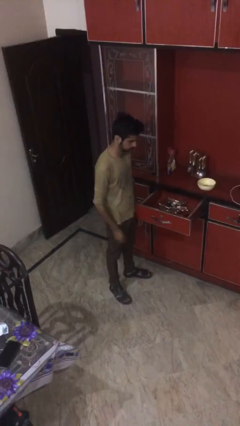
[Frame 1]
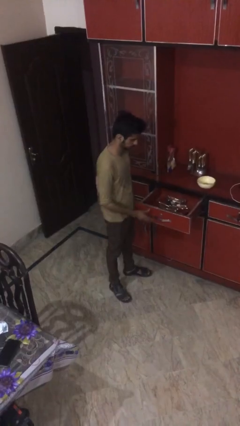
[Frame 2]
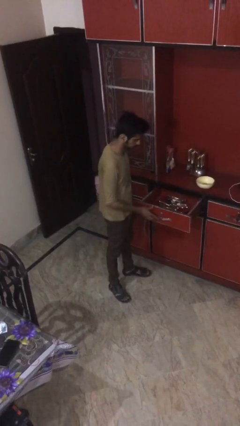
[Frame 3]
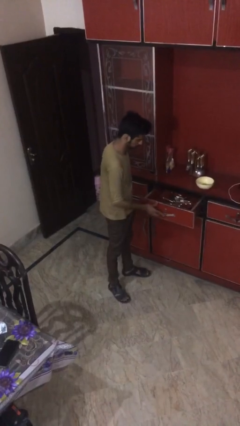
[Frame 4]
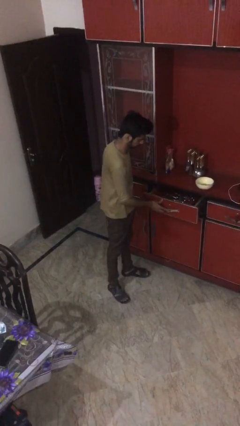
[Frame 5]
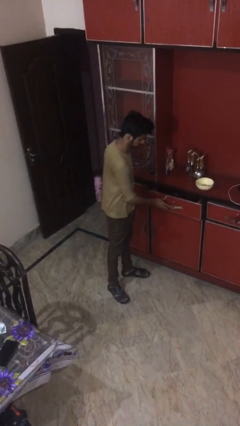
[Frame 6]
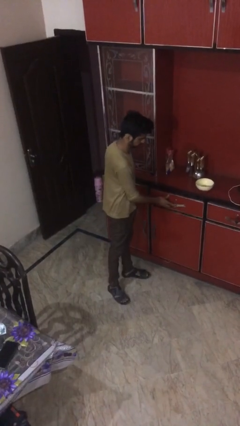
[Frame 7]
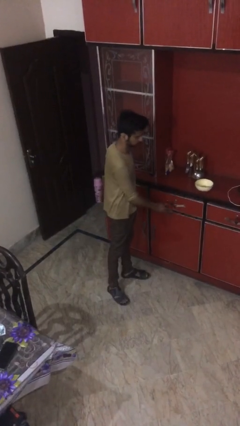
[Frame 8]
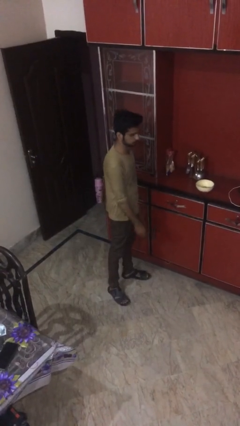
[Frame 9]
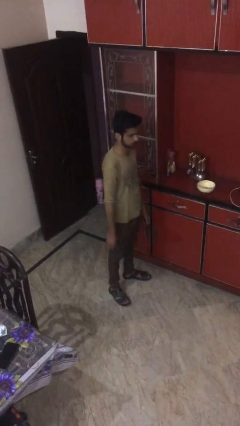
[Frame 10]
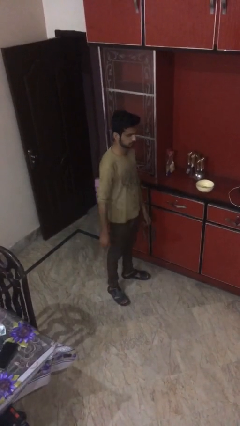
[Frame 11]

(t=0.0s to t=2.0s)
person closes kitchen drawer

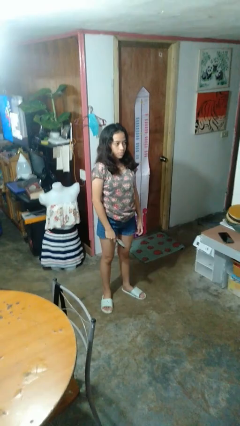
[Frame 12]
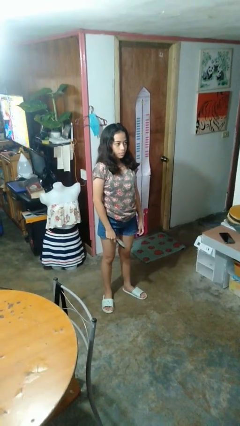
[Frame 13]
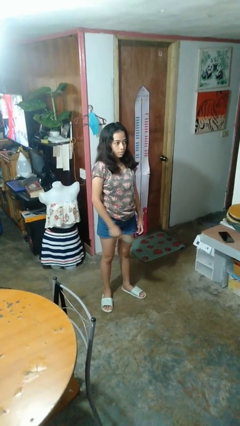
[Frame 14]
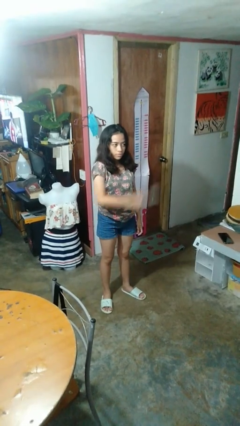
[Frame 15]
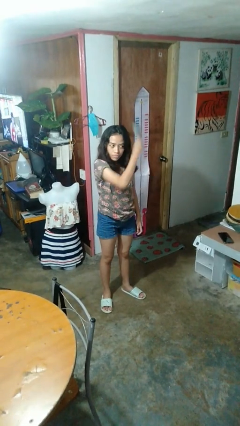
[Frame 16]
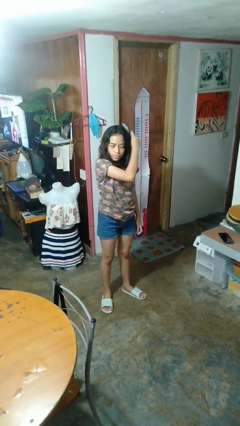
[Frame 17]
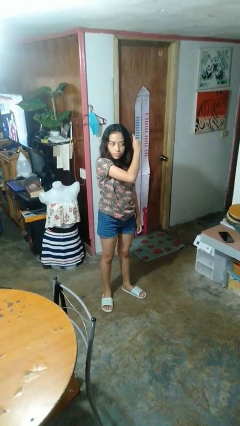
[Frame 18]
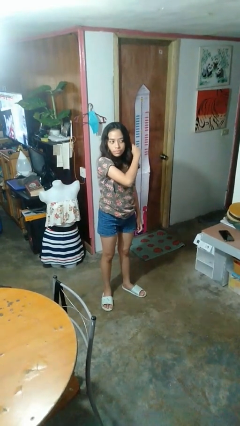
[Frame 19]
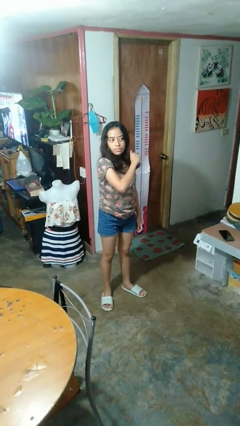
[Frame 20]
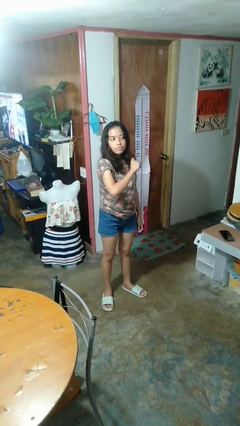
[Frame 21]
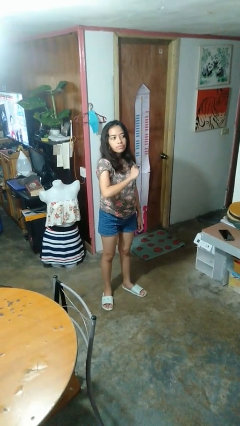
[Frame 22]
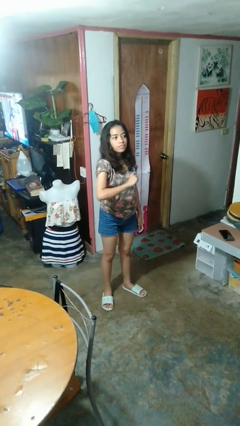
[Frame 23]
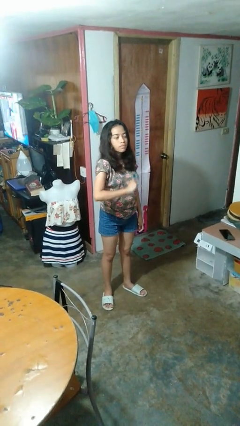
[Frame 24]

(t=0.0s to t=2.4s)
person brushes hair

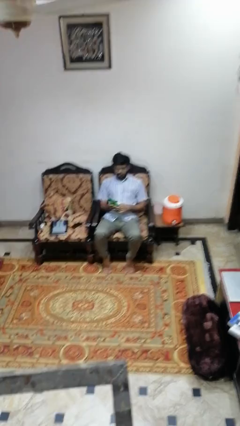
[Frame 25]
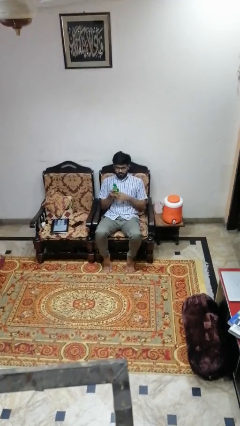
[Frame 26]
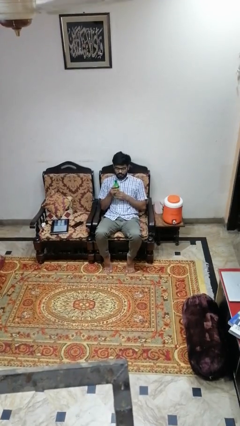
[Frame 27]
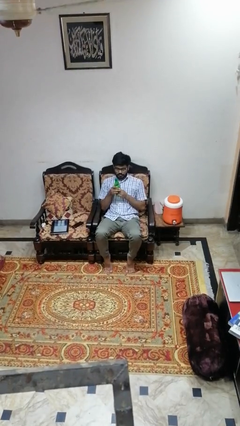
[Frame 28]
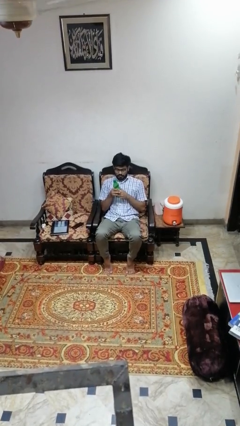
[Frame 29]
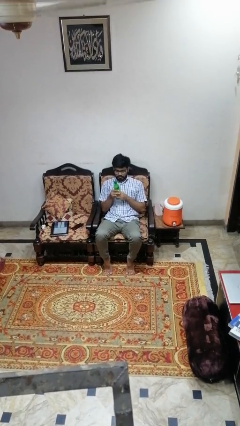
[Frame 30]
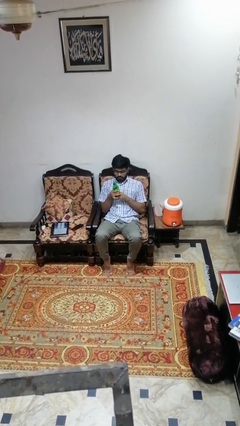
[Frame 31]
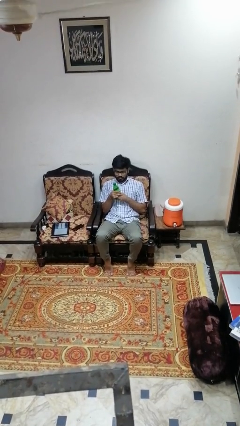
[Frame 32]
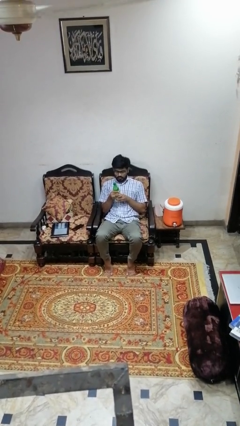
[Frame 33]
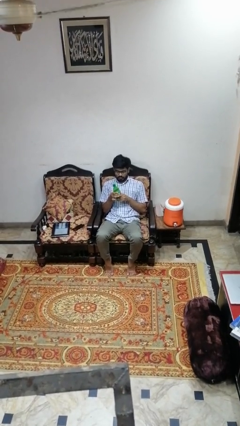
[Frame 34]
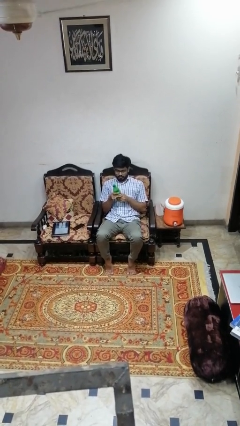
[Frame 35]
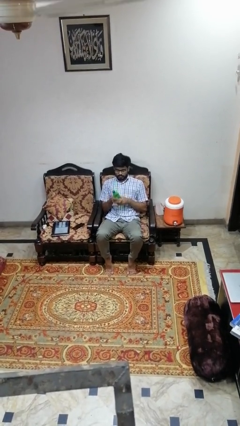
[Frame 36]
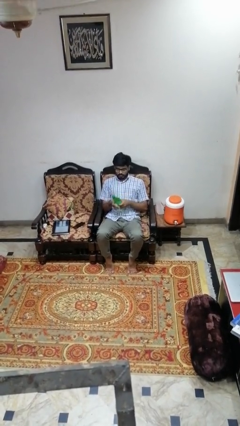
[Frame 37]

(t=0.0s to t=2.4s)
person squeezes object

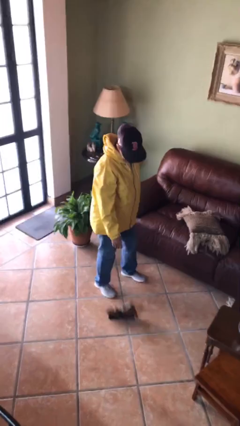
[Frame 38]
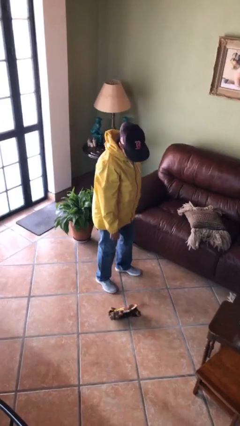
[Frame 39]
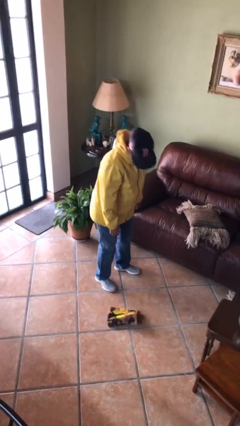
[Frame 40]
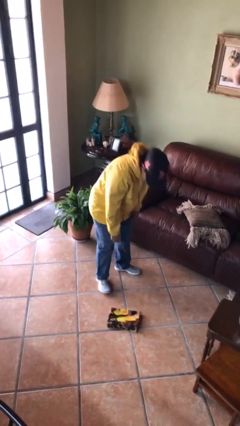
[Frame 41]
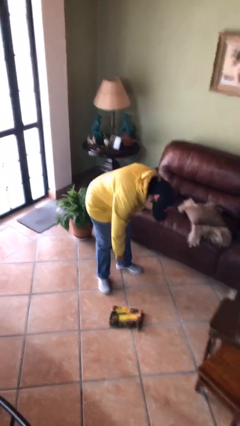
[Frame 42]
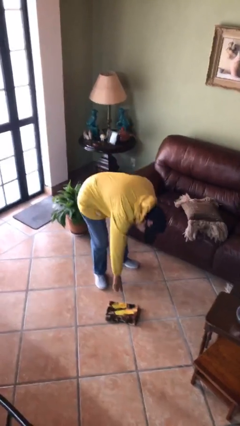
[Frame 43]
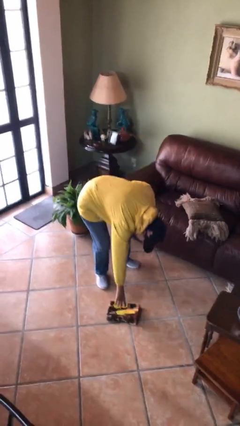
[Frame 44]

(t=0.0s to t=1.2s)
person drops object

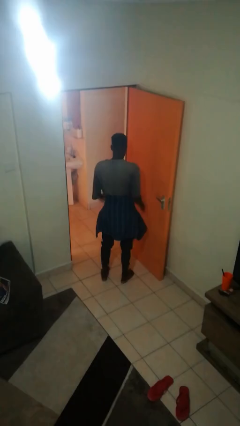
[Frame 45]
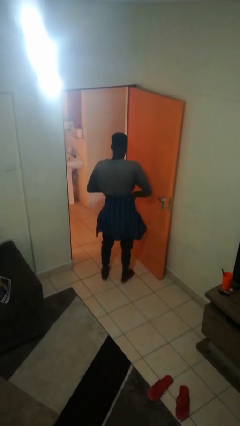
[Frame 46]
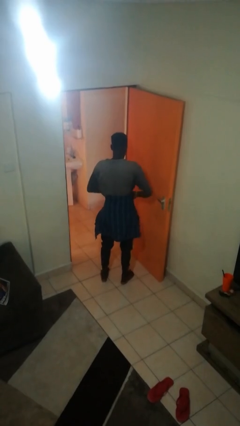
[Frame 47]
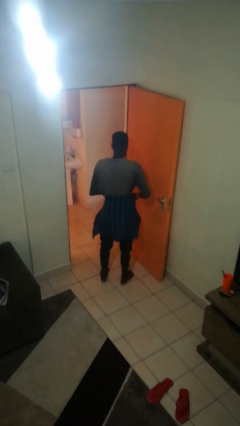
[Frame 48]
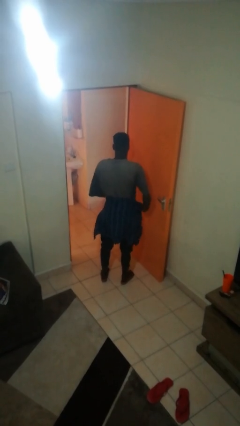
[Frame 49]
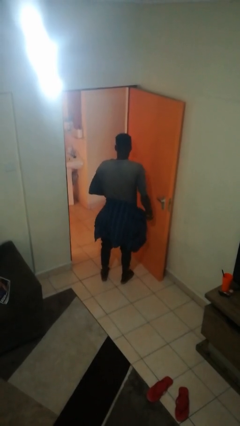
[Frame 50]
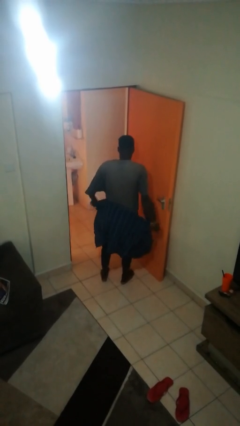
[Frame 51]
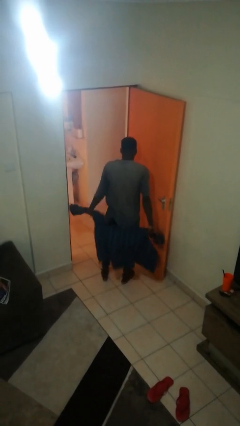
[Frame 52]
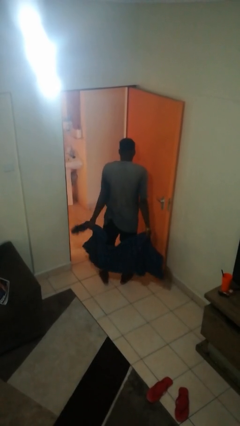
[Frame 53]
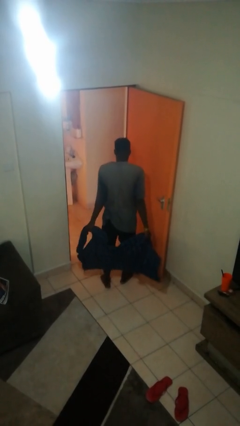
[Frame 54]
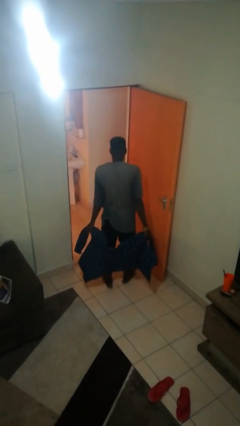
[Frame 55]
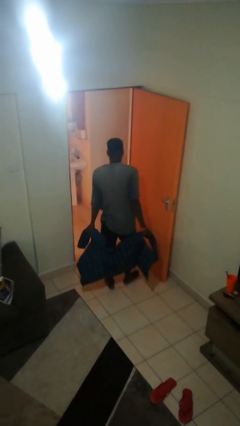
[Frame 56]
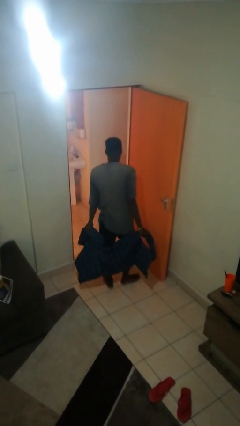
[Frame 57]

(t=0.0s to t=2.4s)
person unties jacket around waist

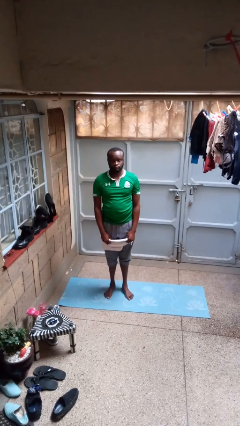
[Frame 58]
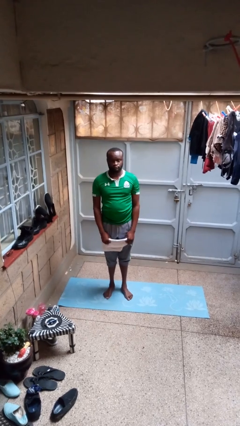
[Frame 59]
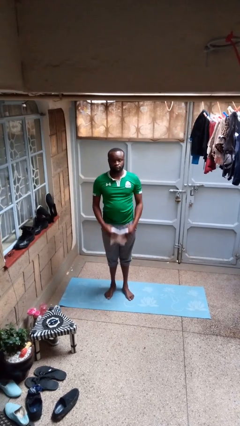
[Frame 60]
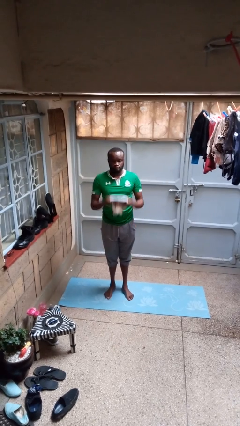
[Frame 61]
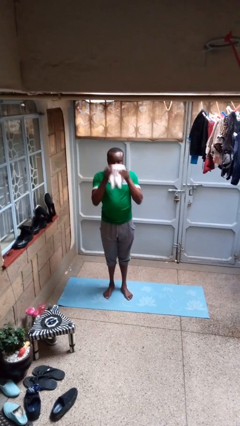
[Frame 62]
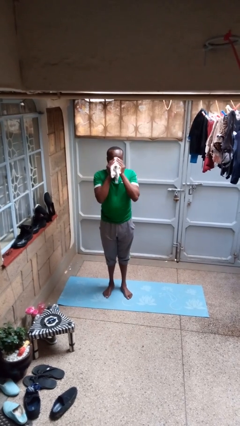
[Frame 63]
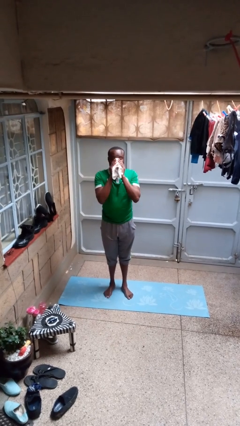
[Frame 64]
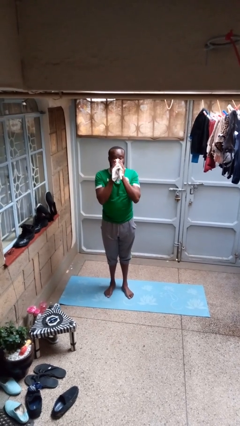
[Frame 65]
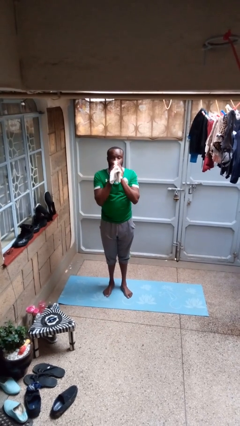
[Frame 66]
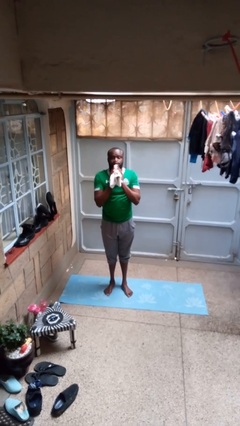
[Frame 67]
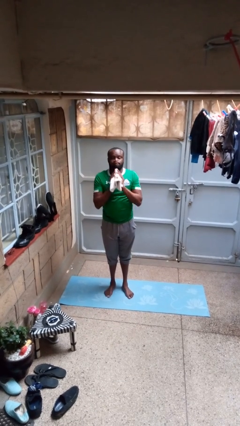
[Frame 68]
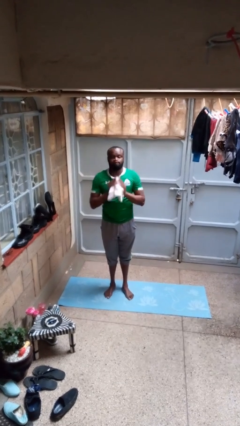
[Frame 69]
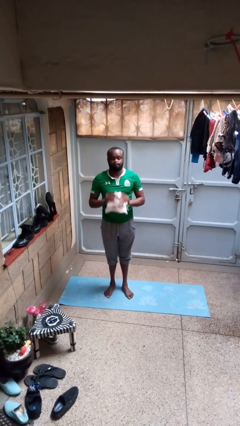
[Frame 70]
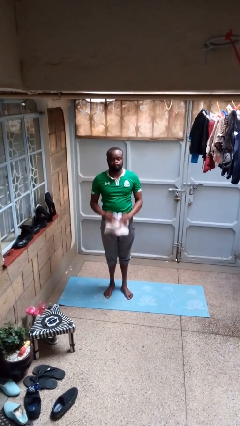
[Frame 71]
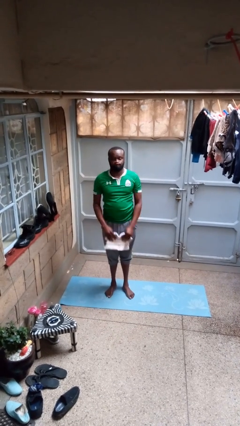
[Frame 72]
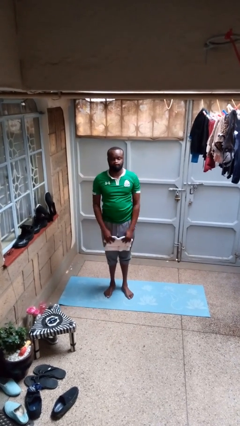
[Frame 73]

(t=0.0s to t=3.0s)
person wipes mouth with napkin

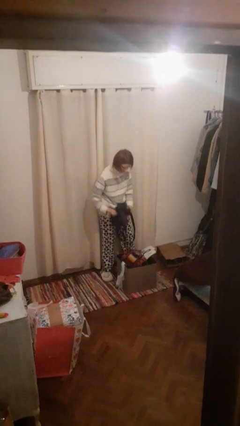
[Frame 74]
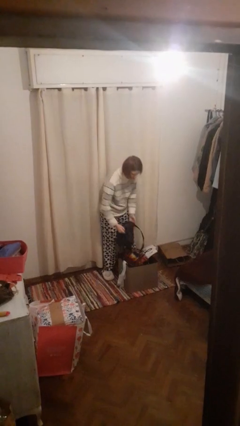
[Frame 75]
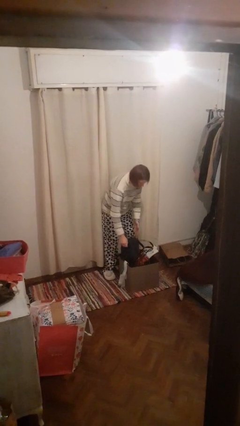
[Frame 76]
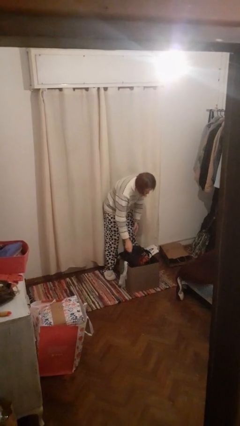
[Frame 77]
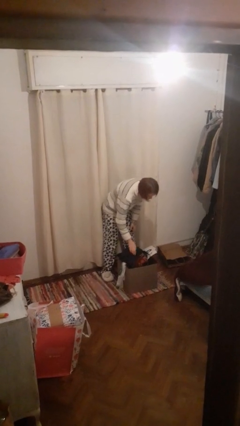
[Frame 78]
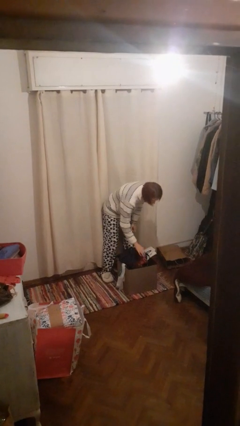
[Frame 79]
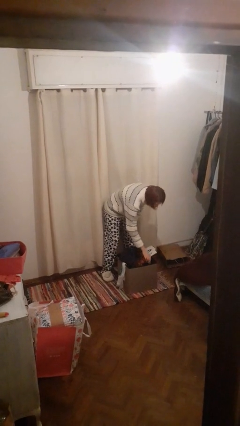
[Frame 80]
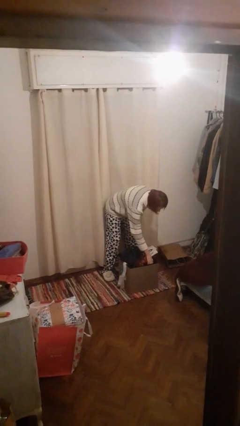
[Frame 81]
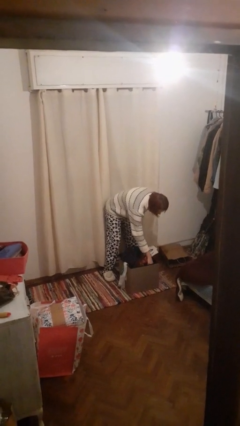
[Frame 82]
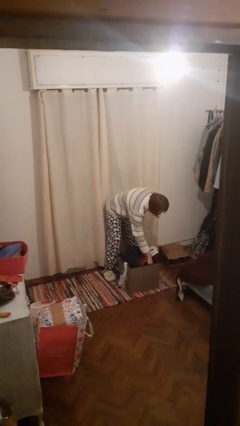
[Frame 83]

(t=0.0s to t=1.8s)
person puts object into basket

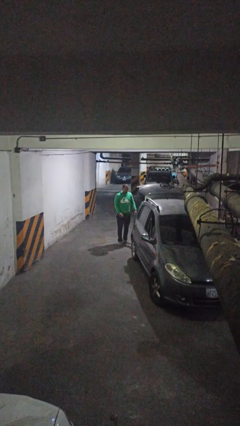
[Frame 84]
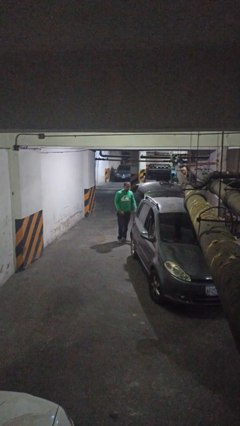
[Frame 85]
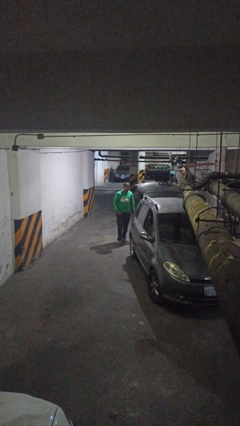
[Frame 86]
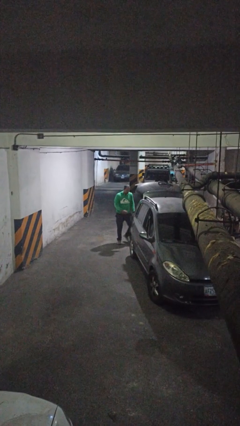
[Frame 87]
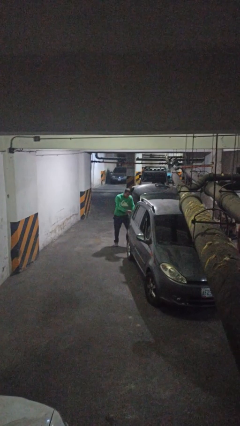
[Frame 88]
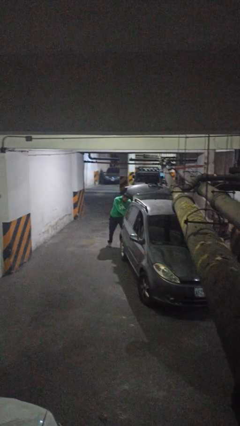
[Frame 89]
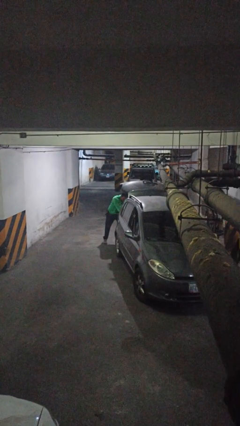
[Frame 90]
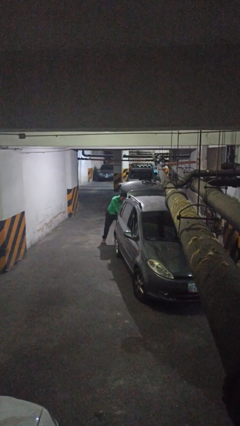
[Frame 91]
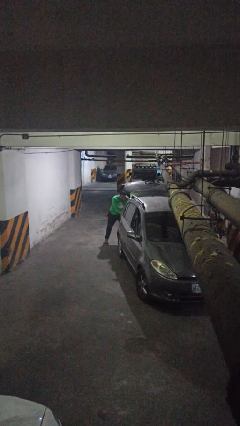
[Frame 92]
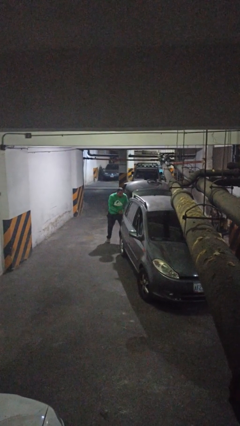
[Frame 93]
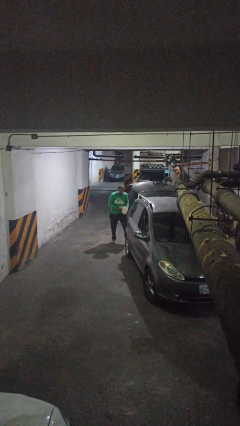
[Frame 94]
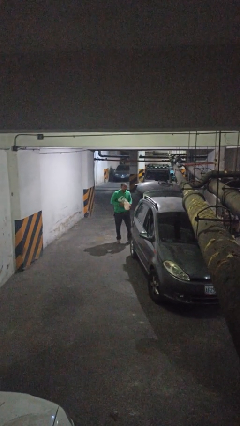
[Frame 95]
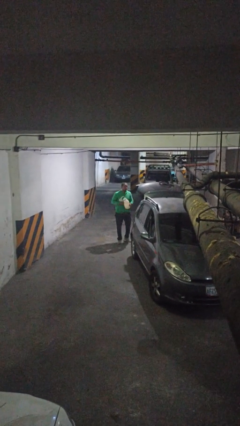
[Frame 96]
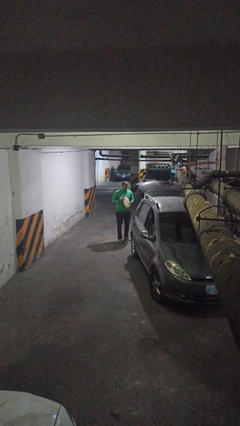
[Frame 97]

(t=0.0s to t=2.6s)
person unloads car
